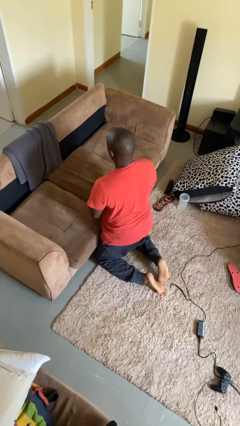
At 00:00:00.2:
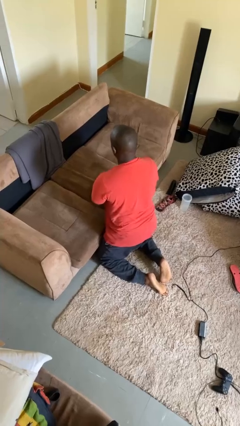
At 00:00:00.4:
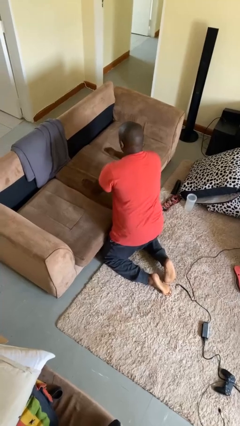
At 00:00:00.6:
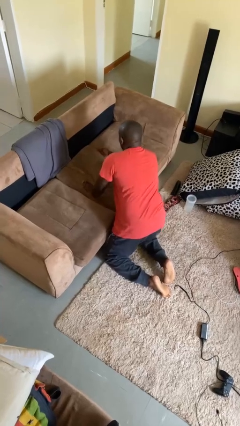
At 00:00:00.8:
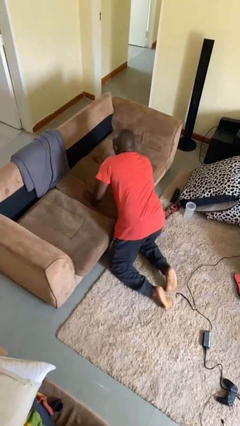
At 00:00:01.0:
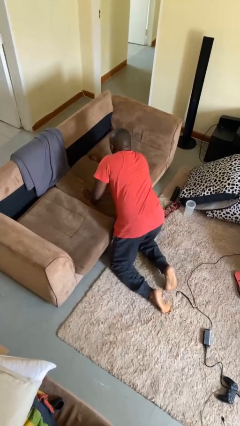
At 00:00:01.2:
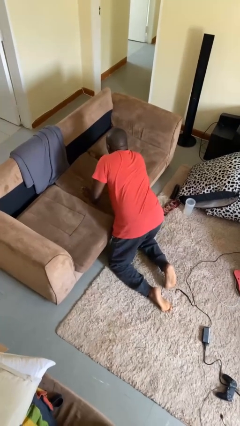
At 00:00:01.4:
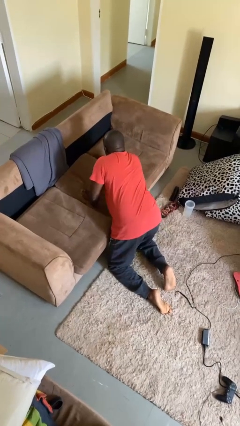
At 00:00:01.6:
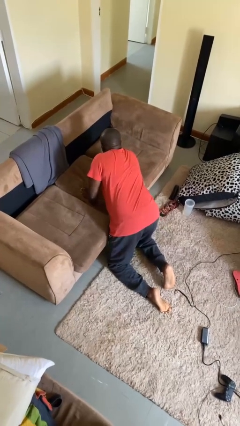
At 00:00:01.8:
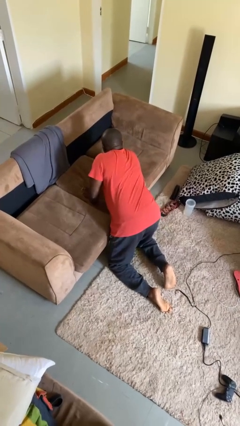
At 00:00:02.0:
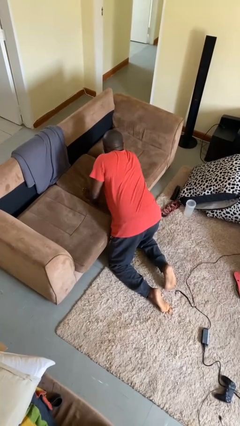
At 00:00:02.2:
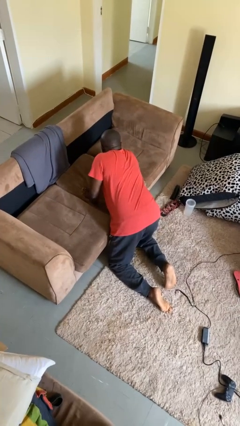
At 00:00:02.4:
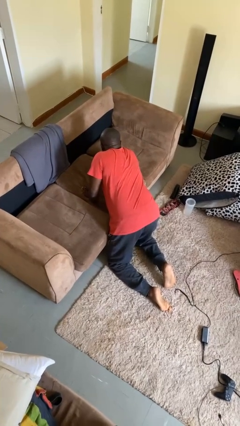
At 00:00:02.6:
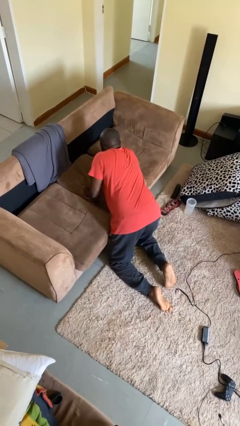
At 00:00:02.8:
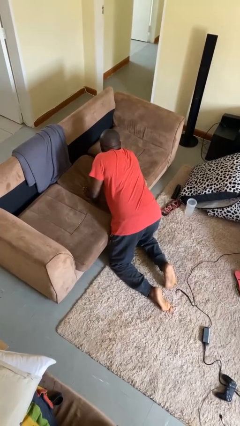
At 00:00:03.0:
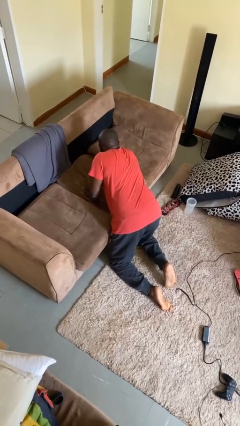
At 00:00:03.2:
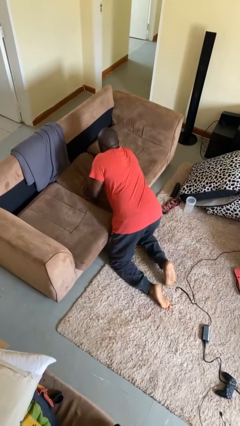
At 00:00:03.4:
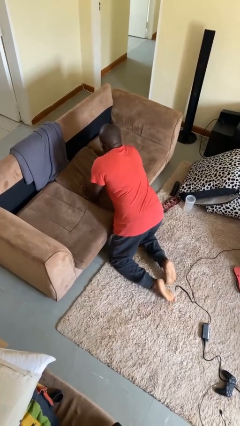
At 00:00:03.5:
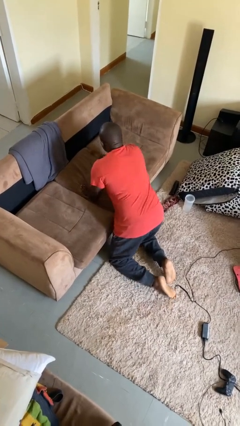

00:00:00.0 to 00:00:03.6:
person searches in couch

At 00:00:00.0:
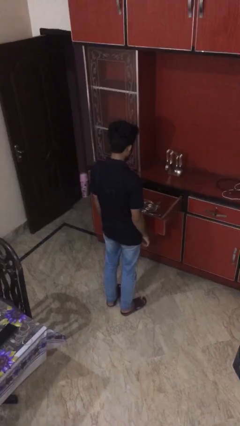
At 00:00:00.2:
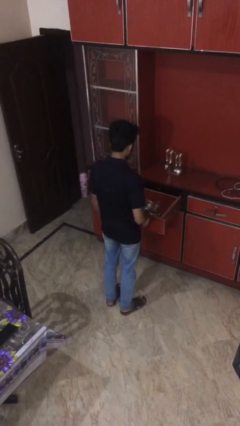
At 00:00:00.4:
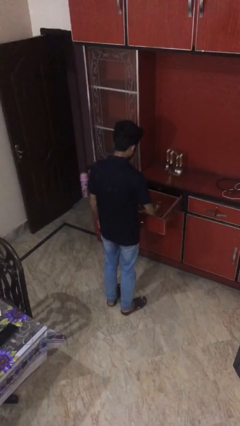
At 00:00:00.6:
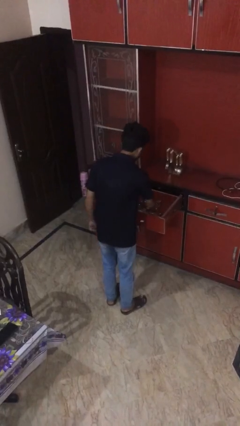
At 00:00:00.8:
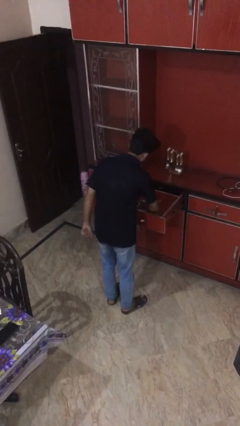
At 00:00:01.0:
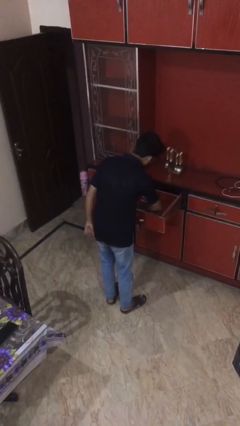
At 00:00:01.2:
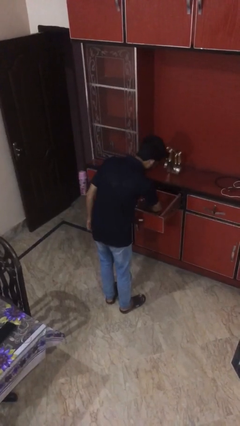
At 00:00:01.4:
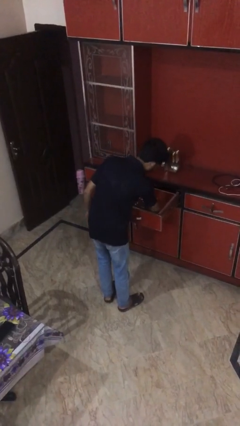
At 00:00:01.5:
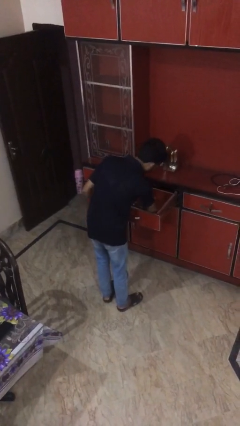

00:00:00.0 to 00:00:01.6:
person searches in kitchen drawer

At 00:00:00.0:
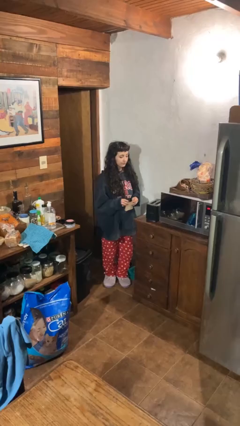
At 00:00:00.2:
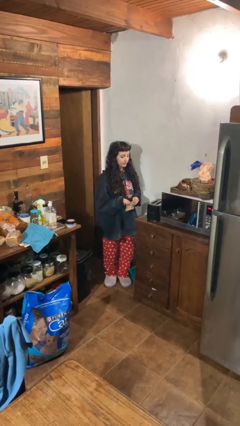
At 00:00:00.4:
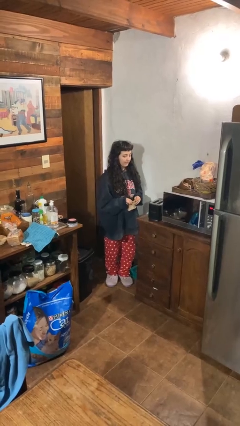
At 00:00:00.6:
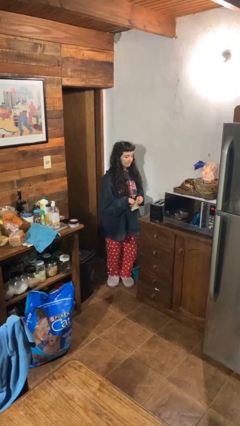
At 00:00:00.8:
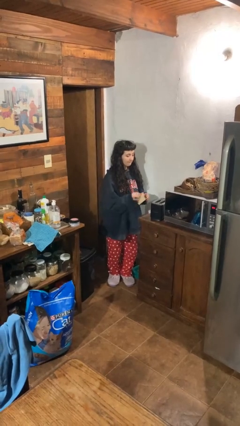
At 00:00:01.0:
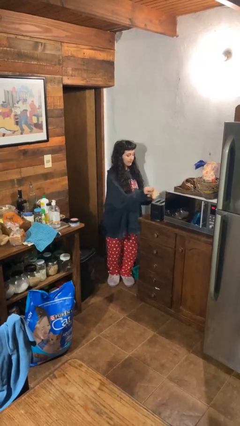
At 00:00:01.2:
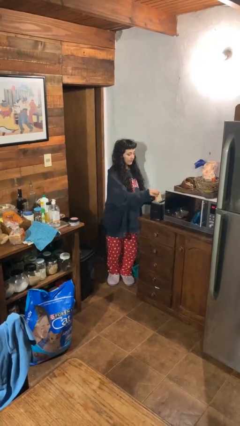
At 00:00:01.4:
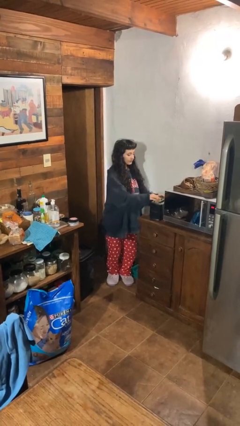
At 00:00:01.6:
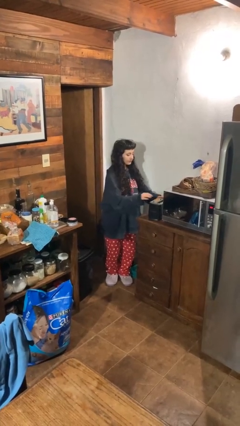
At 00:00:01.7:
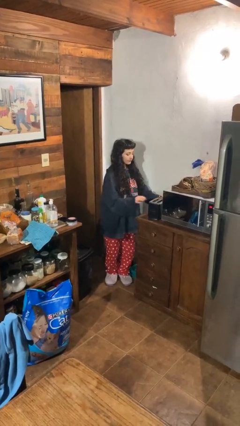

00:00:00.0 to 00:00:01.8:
person puts object into toaster

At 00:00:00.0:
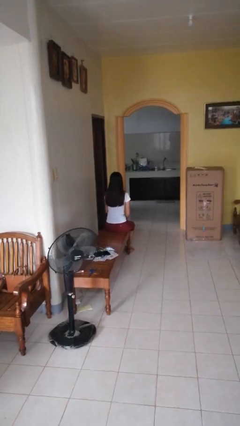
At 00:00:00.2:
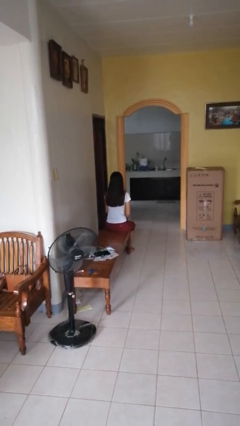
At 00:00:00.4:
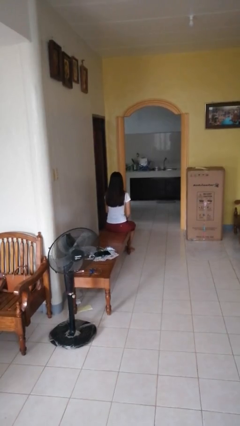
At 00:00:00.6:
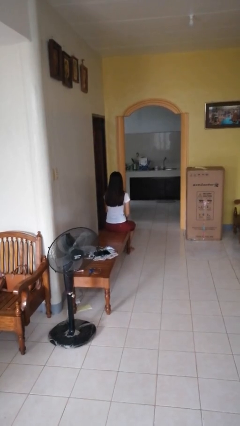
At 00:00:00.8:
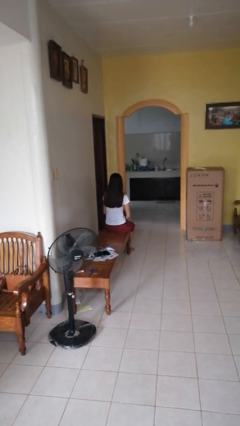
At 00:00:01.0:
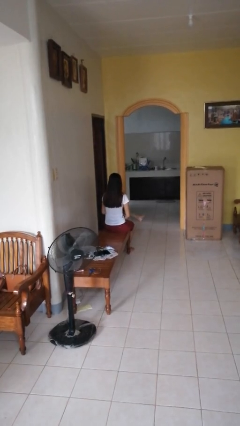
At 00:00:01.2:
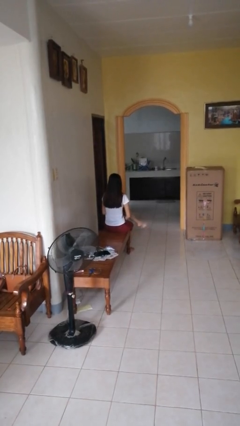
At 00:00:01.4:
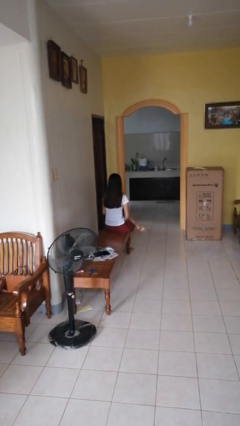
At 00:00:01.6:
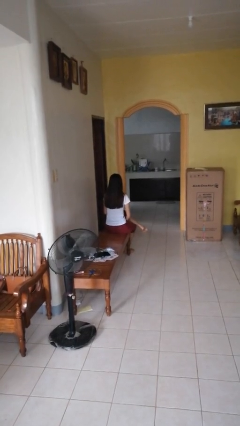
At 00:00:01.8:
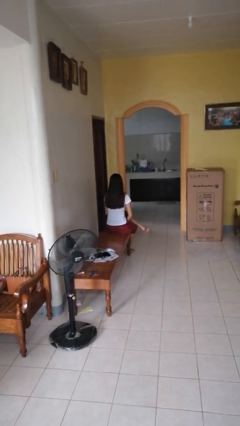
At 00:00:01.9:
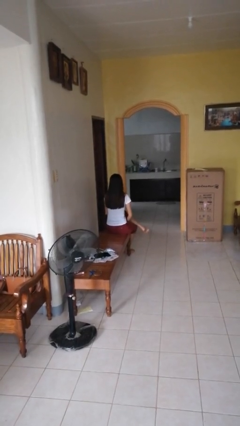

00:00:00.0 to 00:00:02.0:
person crosses legs

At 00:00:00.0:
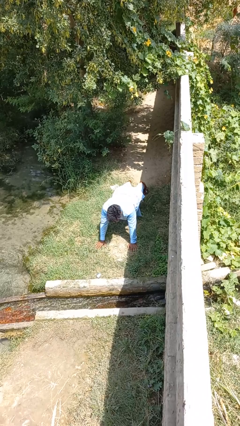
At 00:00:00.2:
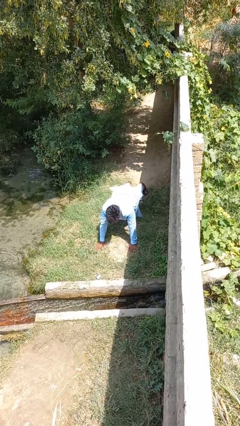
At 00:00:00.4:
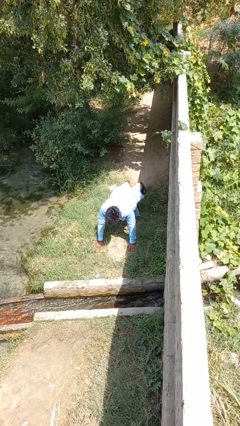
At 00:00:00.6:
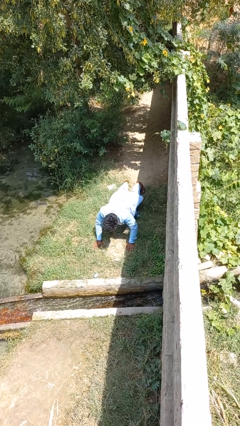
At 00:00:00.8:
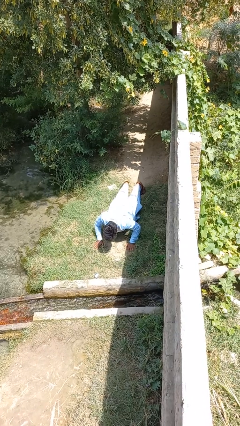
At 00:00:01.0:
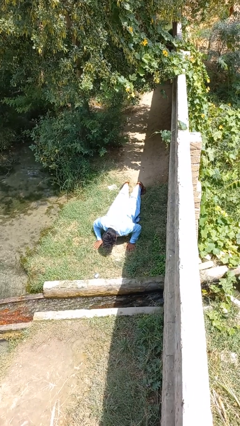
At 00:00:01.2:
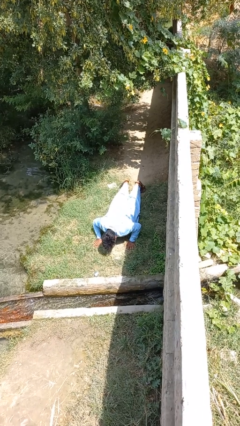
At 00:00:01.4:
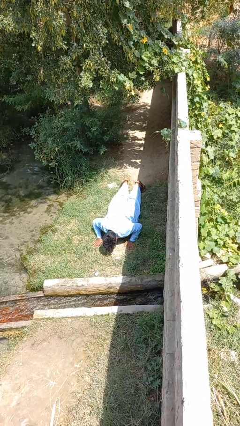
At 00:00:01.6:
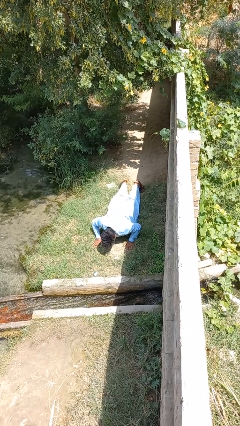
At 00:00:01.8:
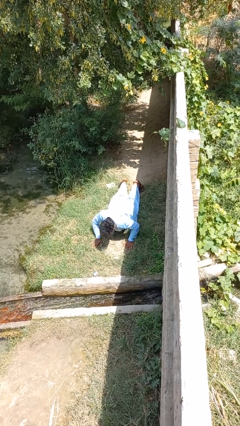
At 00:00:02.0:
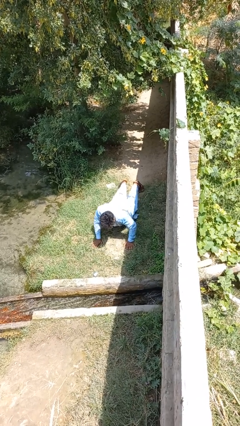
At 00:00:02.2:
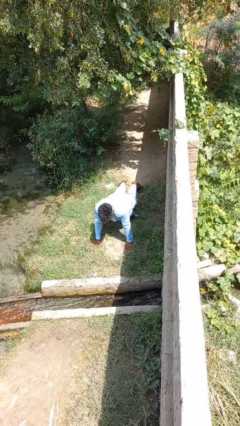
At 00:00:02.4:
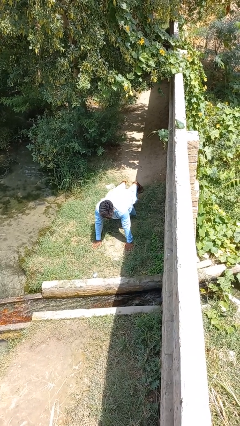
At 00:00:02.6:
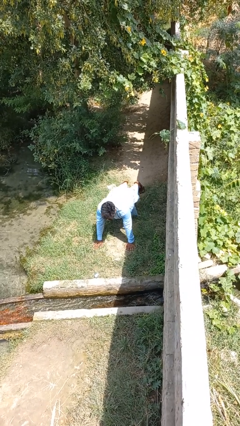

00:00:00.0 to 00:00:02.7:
person exercises with pushup

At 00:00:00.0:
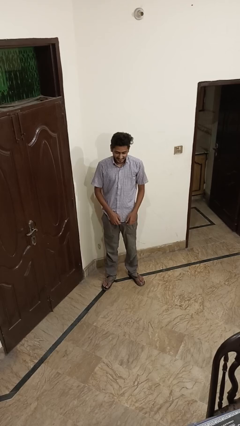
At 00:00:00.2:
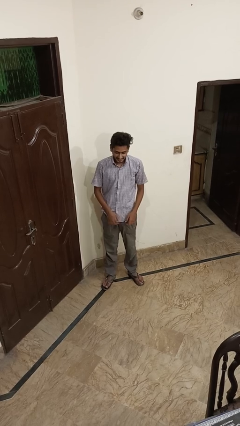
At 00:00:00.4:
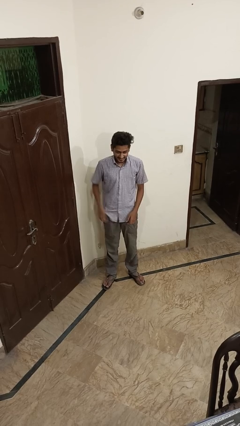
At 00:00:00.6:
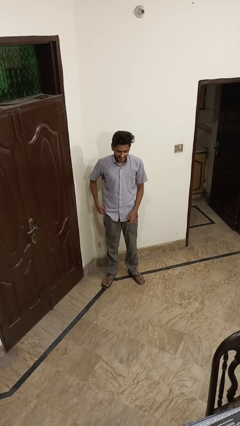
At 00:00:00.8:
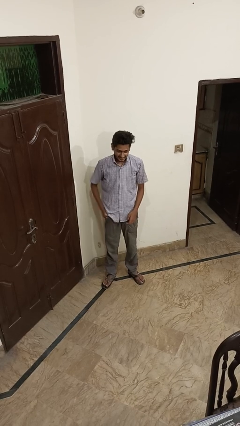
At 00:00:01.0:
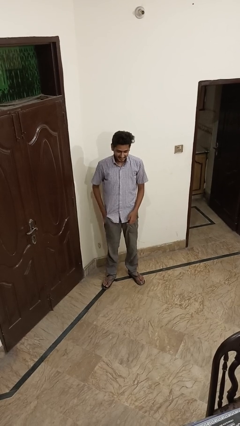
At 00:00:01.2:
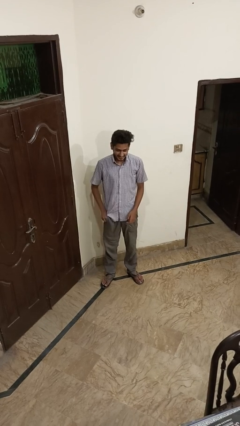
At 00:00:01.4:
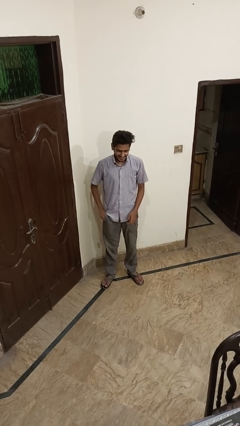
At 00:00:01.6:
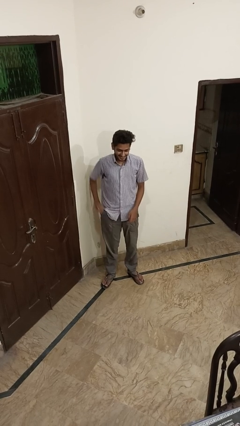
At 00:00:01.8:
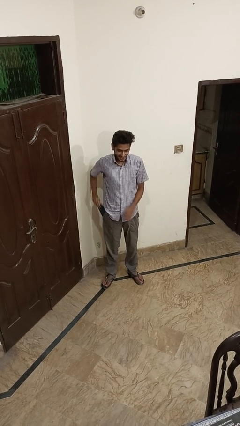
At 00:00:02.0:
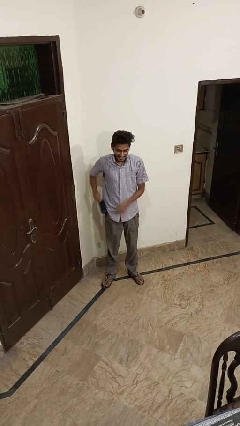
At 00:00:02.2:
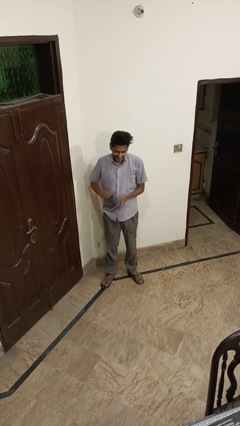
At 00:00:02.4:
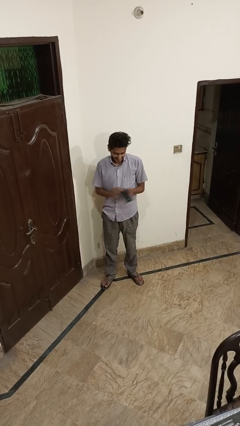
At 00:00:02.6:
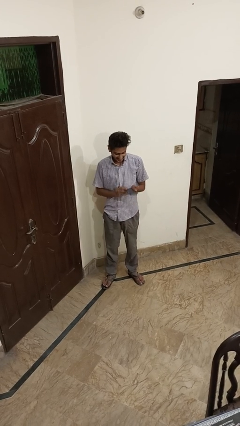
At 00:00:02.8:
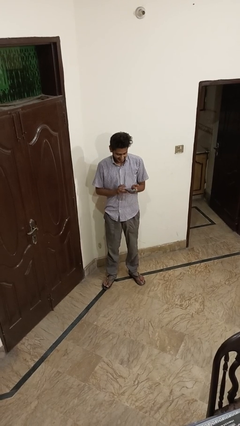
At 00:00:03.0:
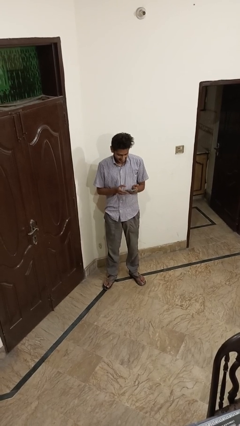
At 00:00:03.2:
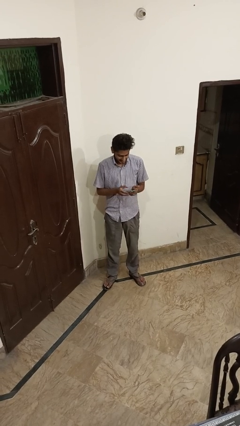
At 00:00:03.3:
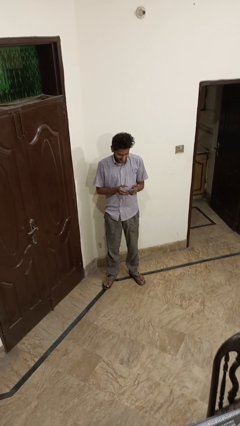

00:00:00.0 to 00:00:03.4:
person takes phone from pocket

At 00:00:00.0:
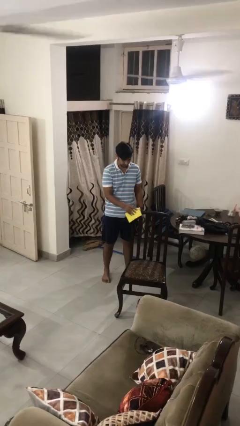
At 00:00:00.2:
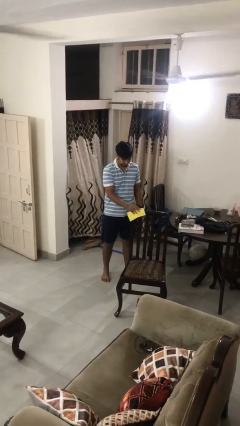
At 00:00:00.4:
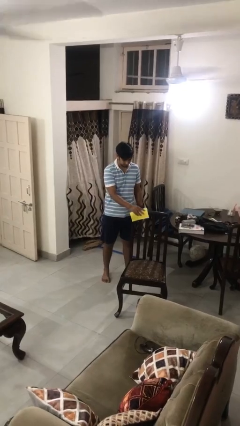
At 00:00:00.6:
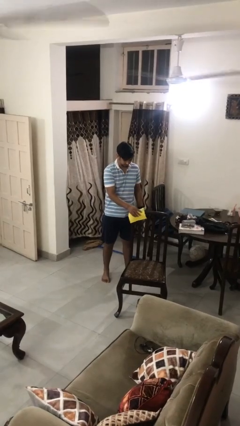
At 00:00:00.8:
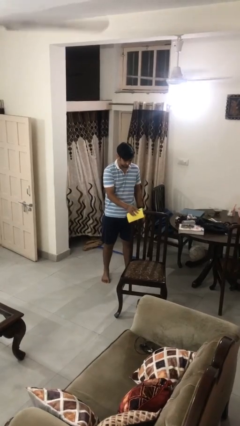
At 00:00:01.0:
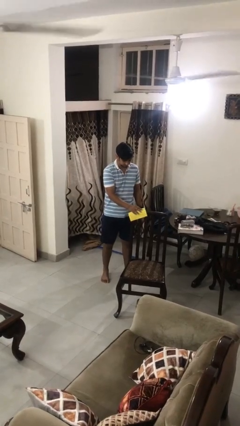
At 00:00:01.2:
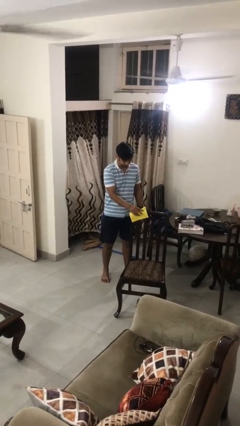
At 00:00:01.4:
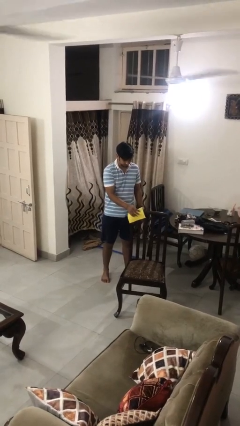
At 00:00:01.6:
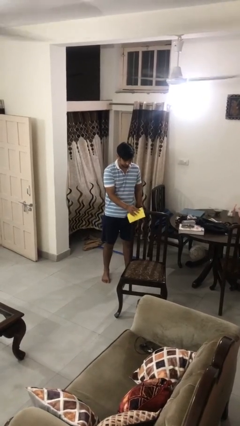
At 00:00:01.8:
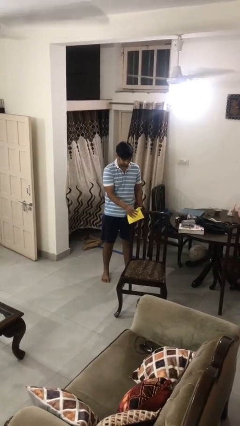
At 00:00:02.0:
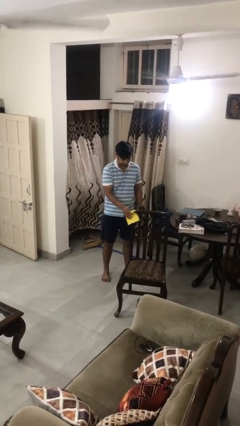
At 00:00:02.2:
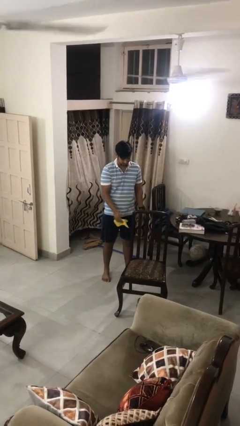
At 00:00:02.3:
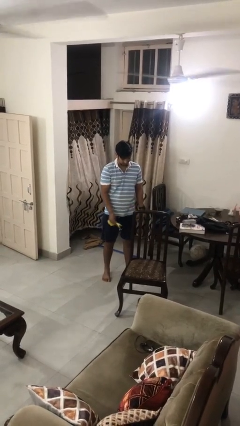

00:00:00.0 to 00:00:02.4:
person dusts furniture
